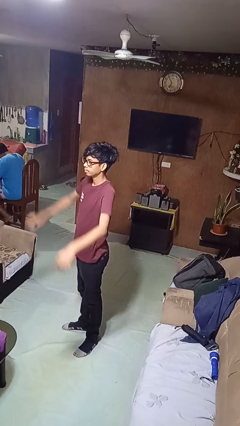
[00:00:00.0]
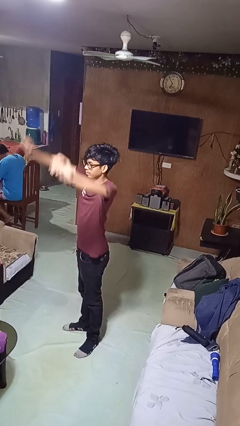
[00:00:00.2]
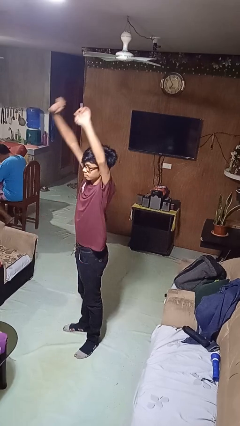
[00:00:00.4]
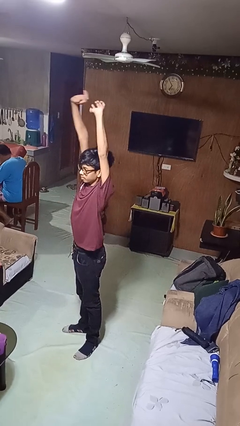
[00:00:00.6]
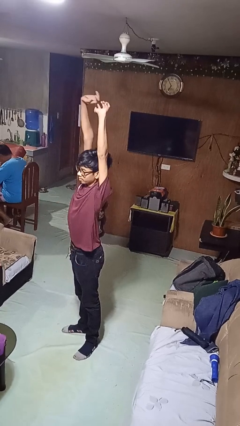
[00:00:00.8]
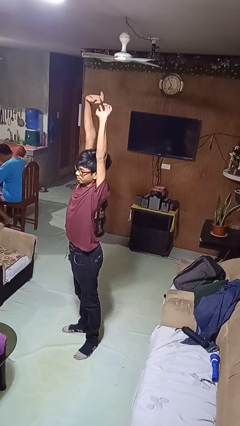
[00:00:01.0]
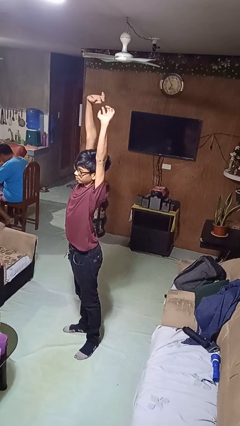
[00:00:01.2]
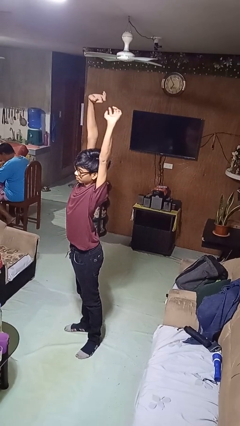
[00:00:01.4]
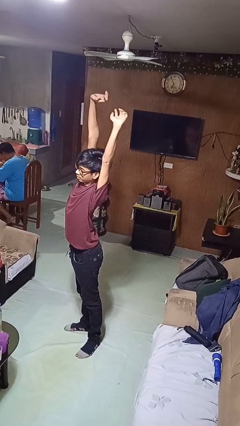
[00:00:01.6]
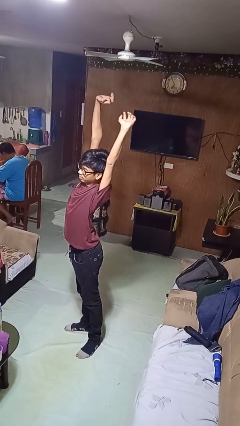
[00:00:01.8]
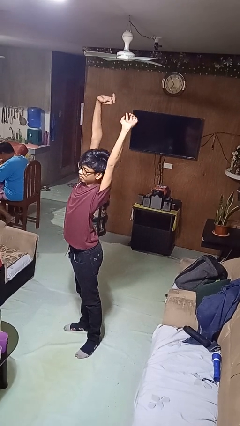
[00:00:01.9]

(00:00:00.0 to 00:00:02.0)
person stretches arms over head

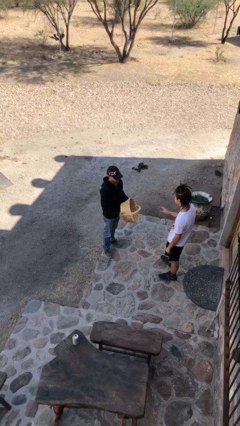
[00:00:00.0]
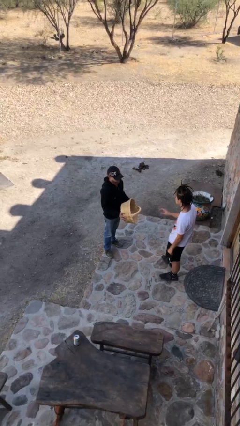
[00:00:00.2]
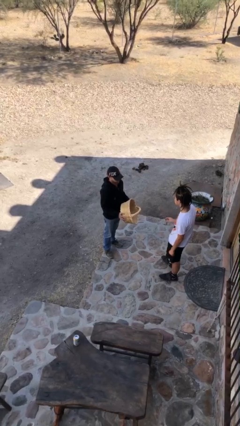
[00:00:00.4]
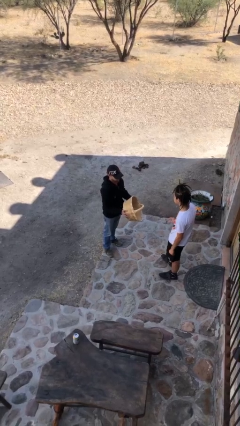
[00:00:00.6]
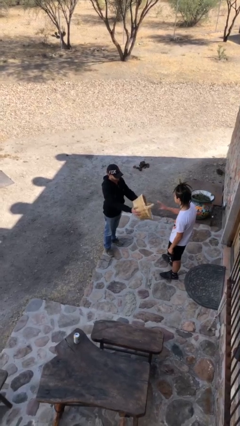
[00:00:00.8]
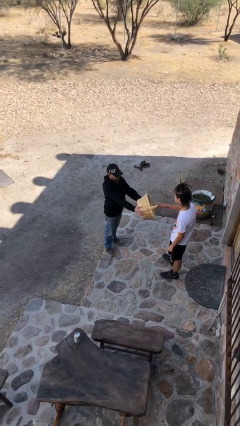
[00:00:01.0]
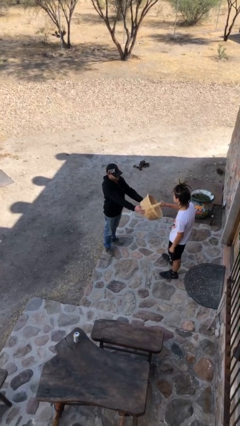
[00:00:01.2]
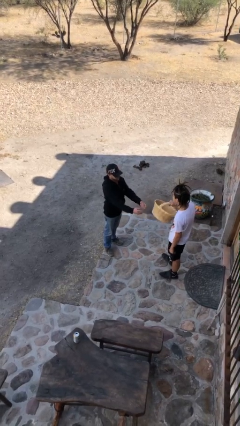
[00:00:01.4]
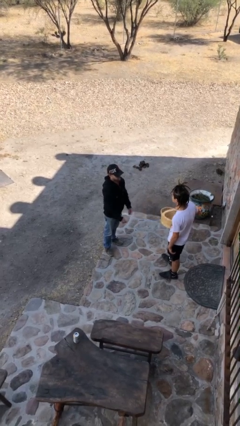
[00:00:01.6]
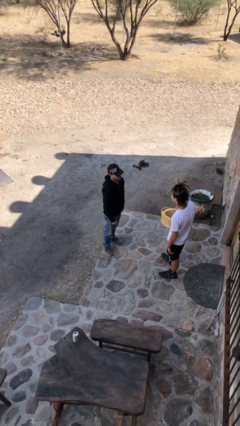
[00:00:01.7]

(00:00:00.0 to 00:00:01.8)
person transfers object to person

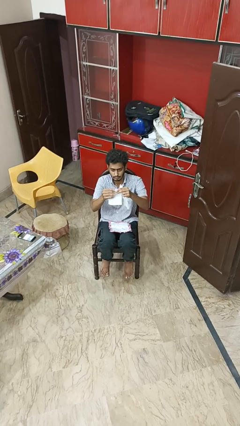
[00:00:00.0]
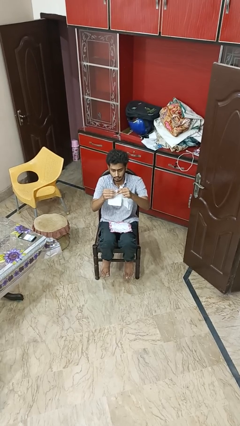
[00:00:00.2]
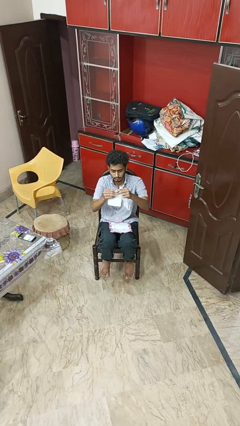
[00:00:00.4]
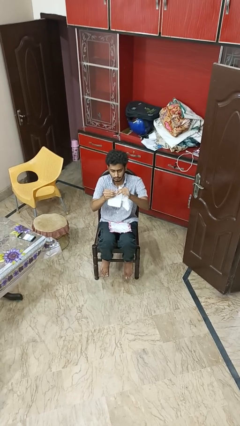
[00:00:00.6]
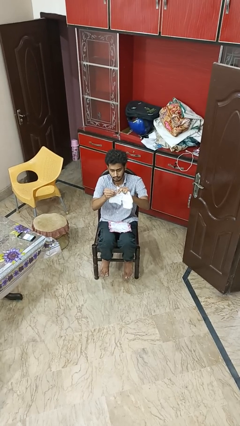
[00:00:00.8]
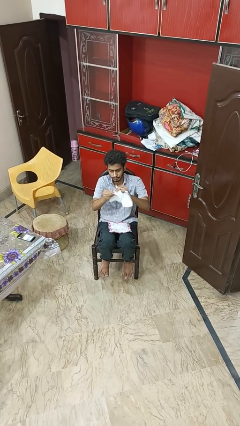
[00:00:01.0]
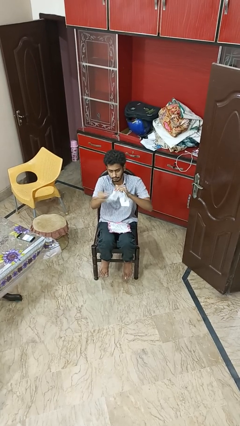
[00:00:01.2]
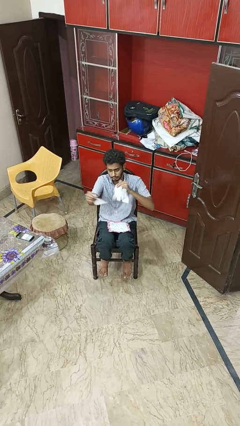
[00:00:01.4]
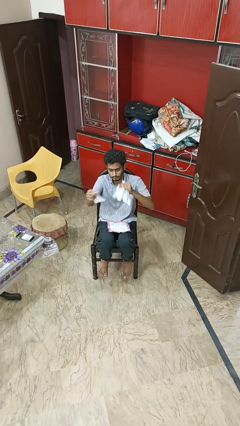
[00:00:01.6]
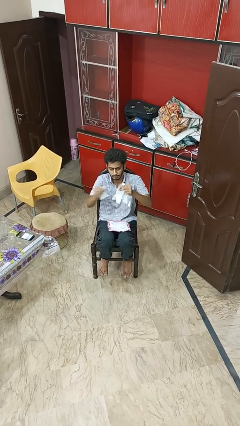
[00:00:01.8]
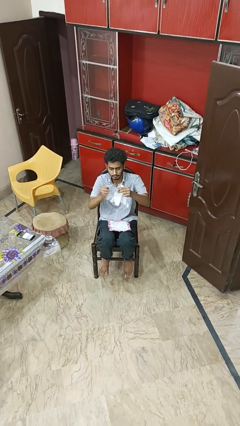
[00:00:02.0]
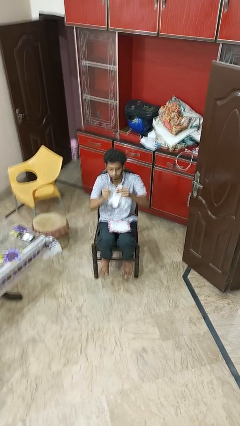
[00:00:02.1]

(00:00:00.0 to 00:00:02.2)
person tears paper

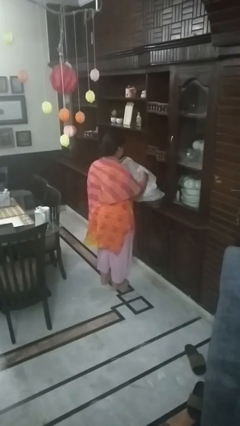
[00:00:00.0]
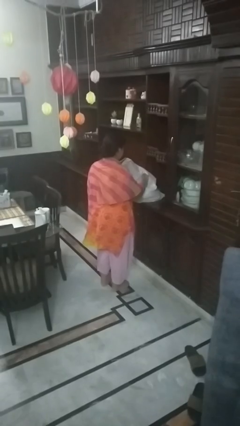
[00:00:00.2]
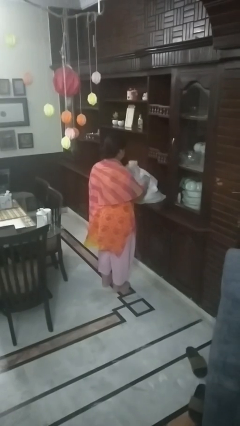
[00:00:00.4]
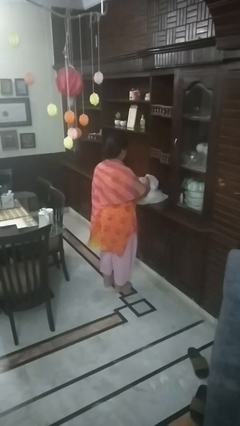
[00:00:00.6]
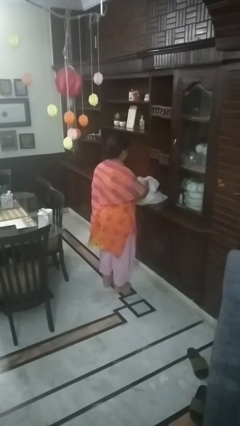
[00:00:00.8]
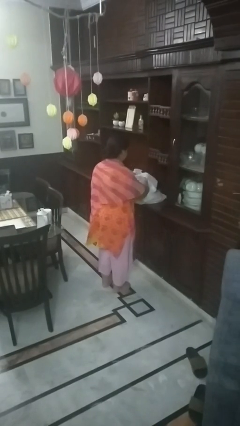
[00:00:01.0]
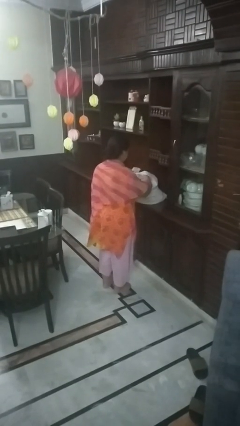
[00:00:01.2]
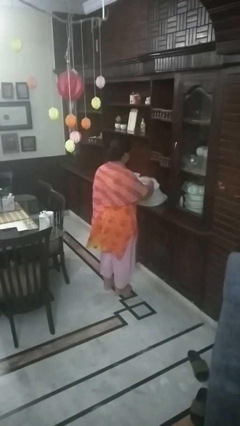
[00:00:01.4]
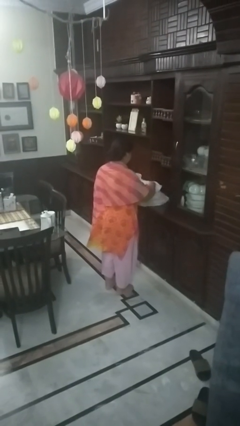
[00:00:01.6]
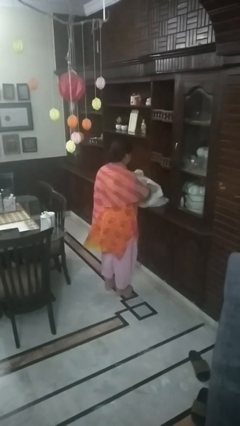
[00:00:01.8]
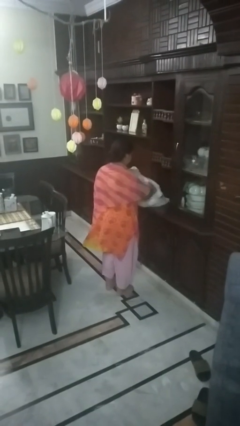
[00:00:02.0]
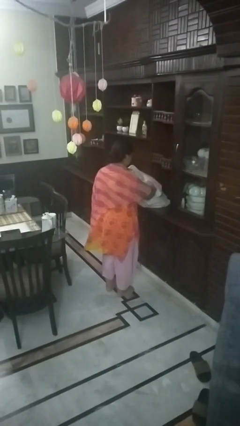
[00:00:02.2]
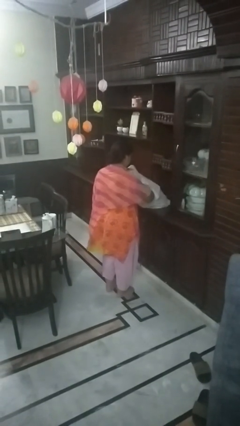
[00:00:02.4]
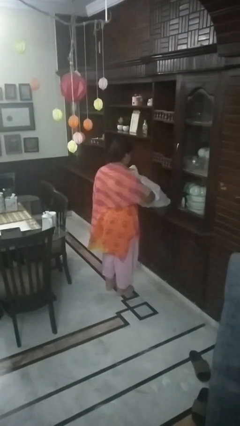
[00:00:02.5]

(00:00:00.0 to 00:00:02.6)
person searches in bag

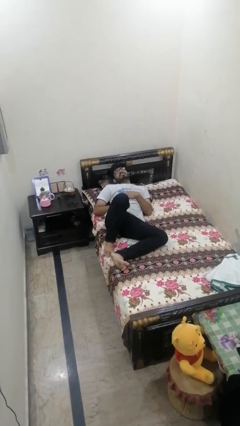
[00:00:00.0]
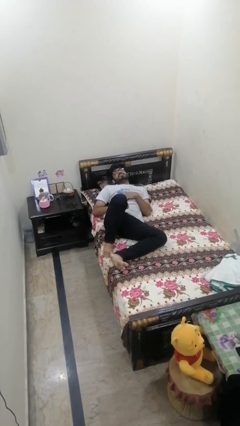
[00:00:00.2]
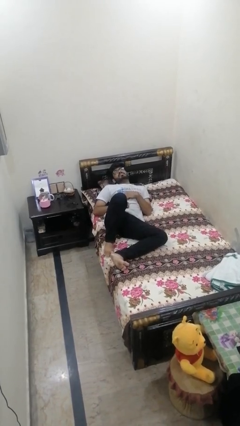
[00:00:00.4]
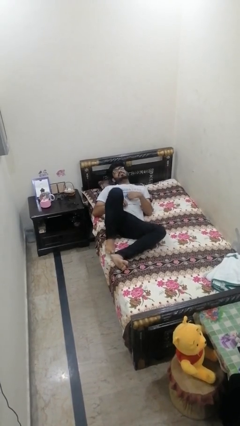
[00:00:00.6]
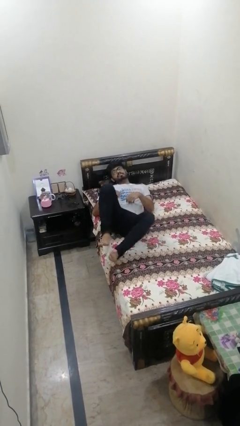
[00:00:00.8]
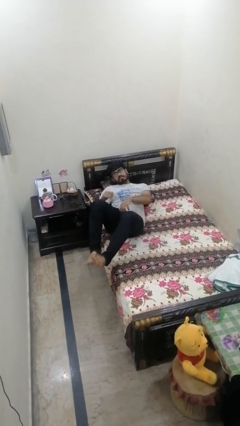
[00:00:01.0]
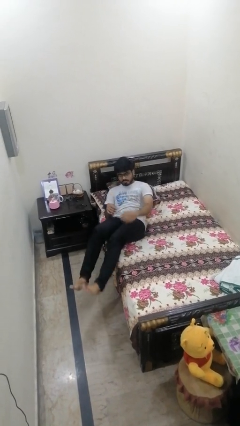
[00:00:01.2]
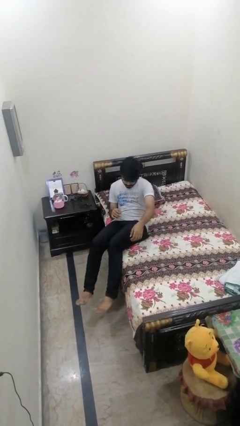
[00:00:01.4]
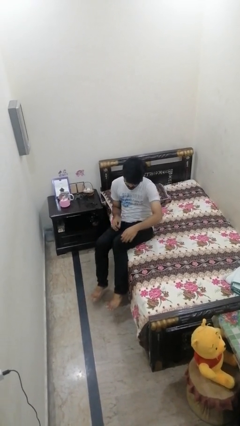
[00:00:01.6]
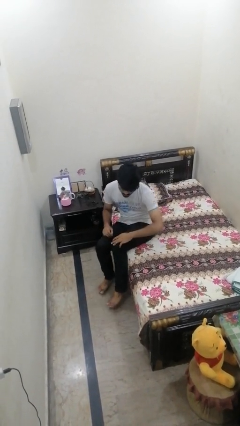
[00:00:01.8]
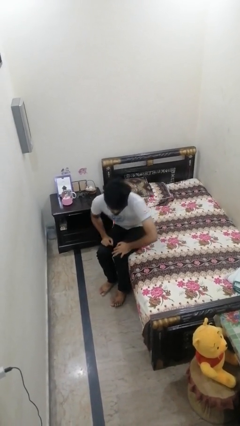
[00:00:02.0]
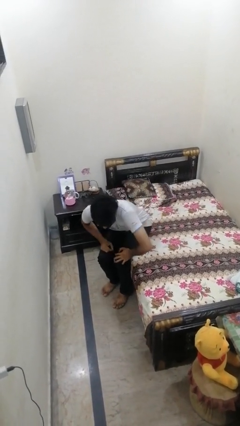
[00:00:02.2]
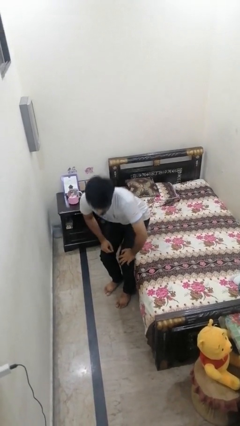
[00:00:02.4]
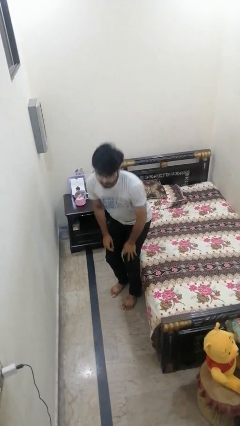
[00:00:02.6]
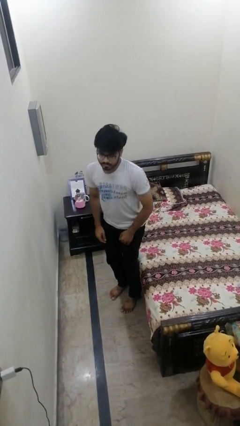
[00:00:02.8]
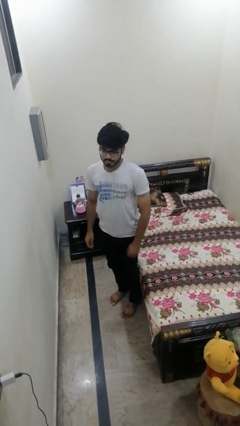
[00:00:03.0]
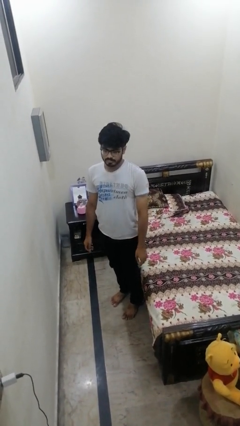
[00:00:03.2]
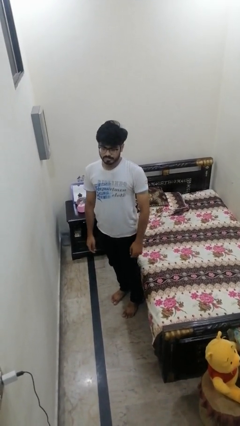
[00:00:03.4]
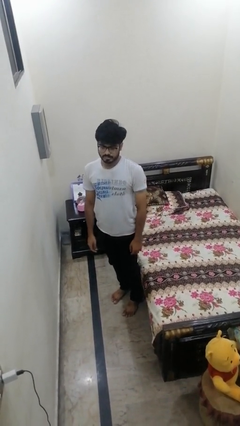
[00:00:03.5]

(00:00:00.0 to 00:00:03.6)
person stands up

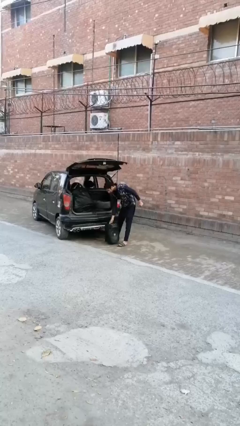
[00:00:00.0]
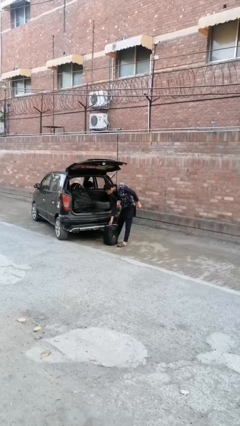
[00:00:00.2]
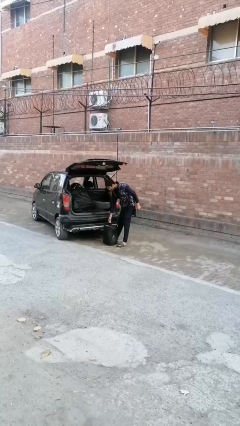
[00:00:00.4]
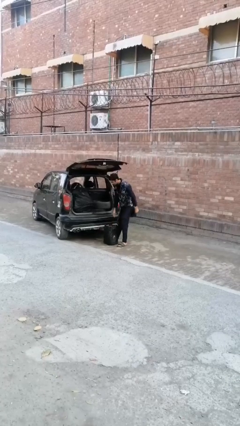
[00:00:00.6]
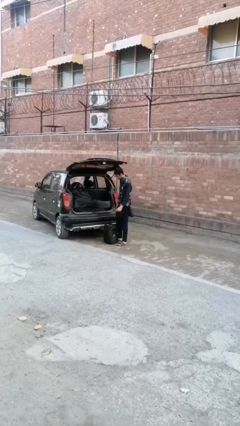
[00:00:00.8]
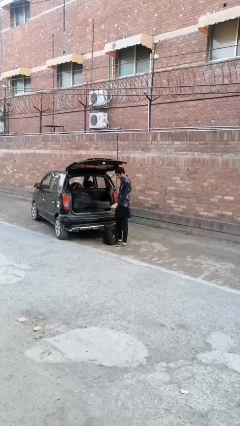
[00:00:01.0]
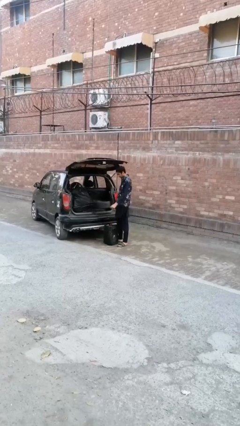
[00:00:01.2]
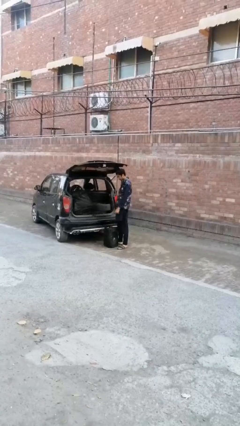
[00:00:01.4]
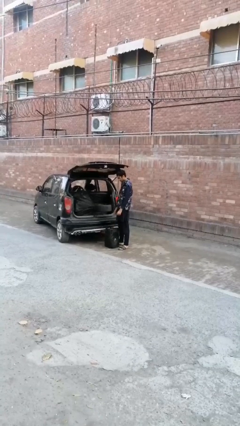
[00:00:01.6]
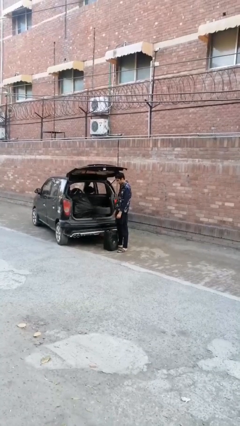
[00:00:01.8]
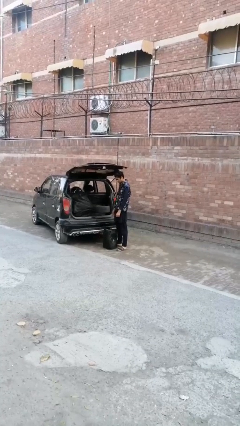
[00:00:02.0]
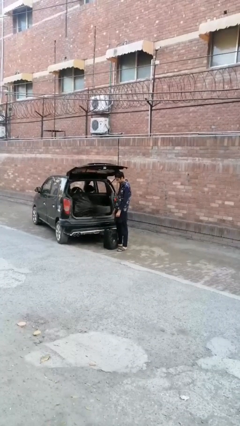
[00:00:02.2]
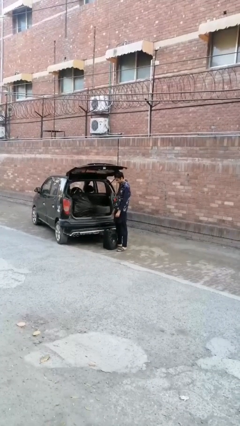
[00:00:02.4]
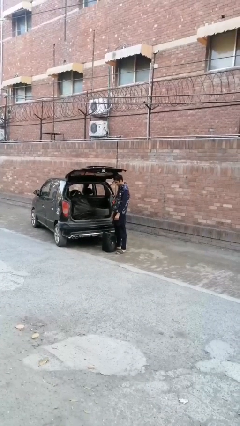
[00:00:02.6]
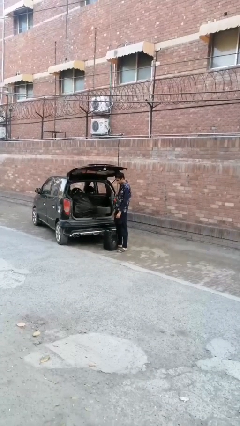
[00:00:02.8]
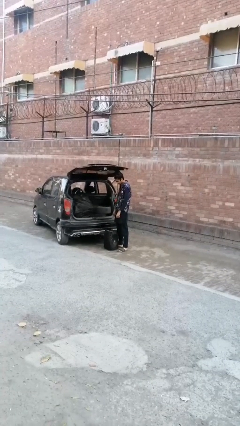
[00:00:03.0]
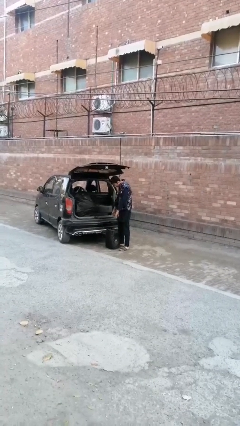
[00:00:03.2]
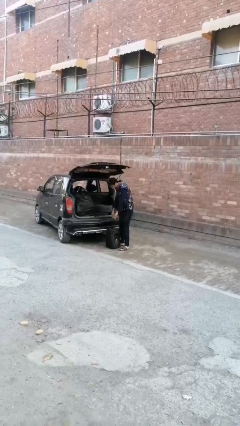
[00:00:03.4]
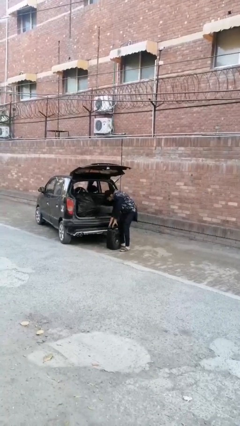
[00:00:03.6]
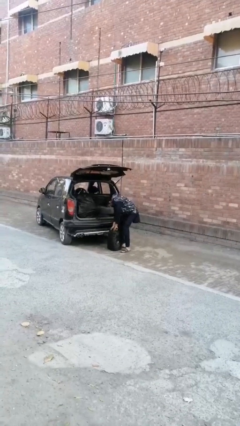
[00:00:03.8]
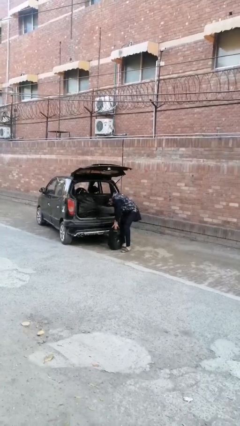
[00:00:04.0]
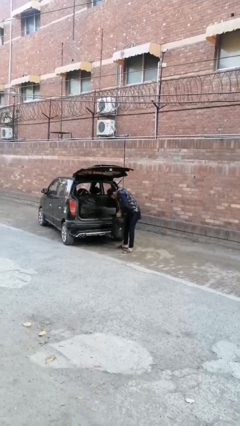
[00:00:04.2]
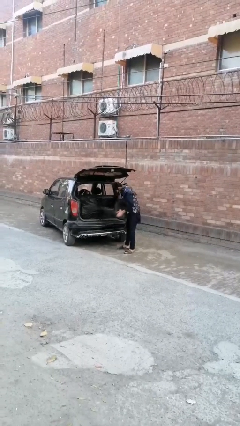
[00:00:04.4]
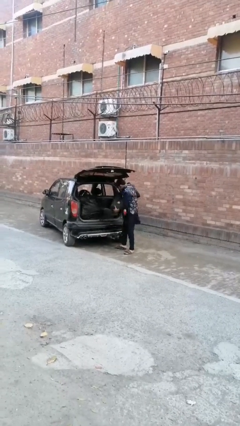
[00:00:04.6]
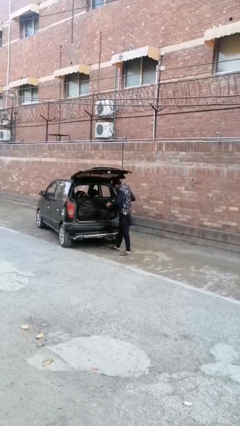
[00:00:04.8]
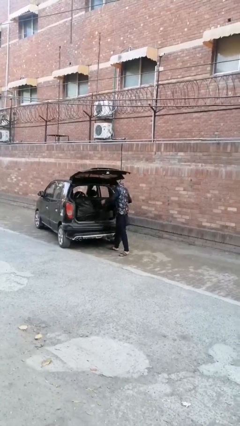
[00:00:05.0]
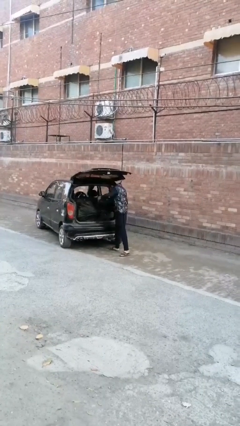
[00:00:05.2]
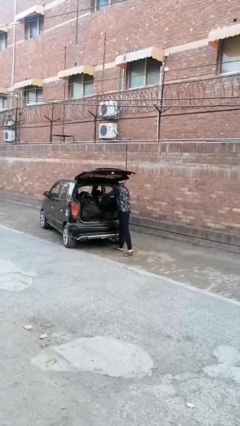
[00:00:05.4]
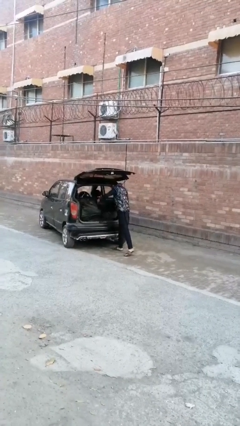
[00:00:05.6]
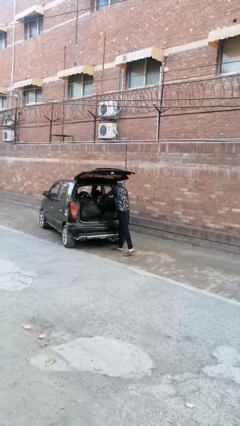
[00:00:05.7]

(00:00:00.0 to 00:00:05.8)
person unloads car
